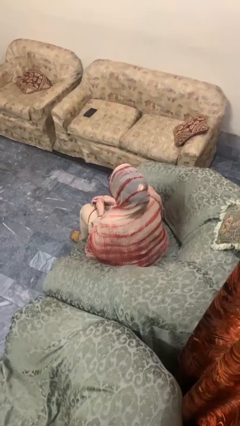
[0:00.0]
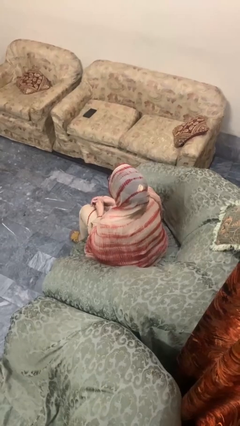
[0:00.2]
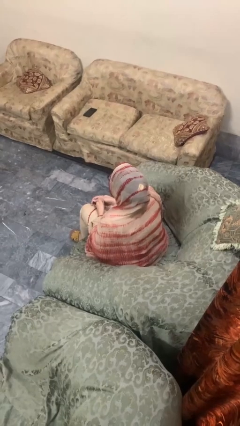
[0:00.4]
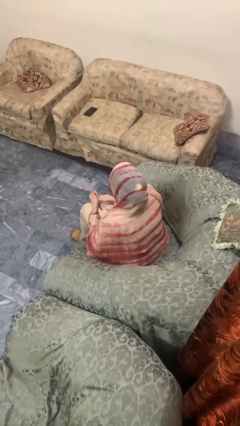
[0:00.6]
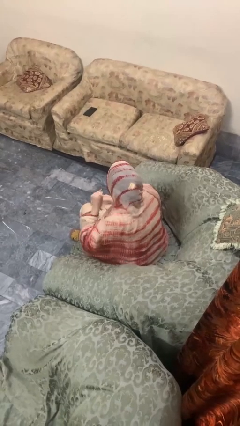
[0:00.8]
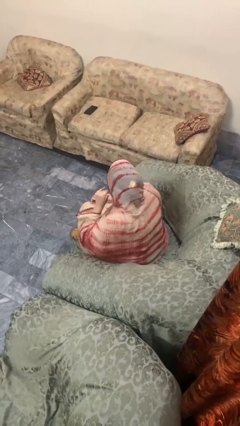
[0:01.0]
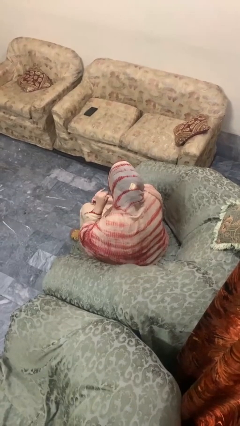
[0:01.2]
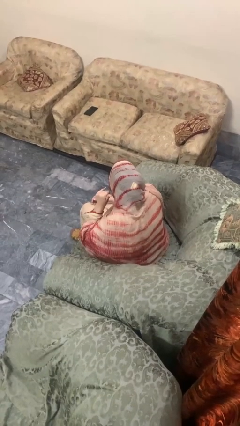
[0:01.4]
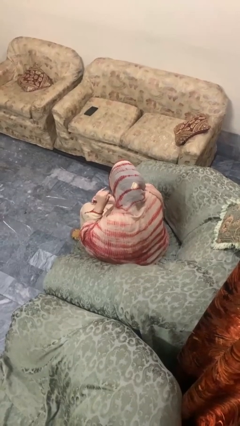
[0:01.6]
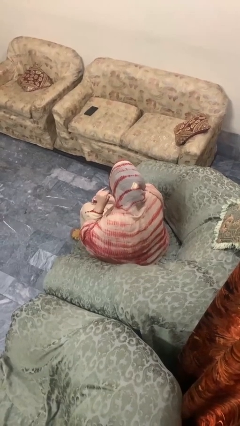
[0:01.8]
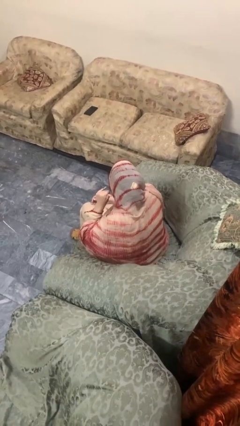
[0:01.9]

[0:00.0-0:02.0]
person gestures call me

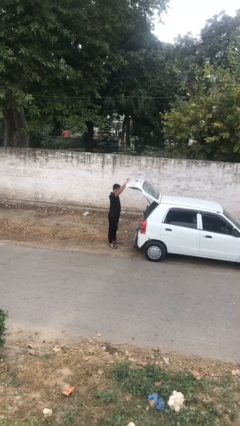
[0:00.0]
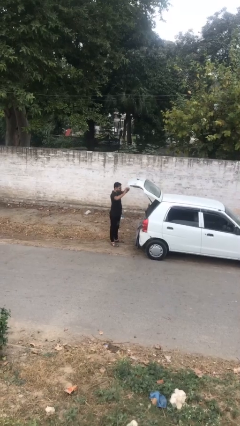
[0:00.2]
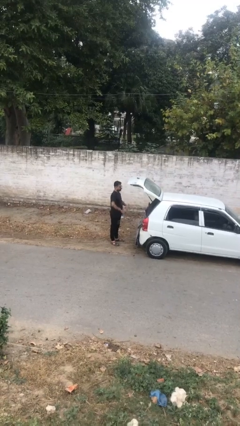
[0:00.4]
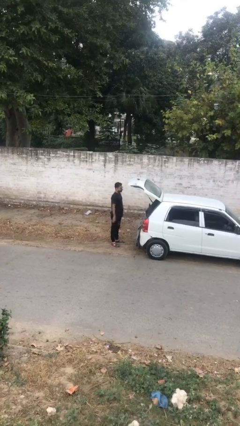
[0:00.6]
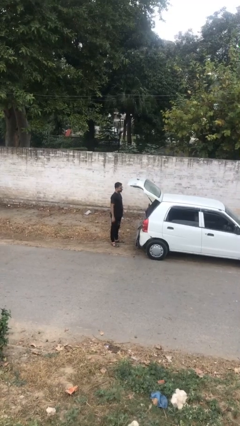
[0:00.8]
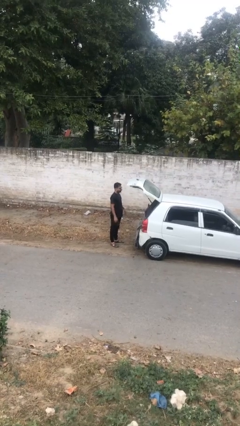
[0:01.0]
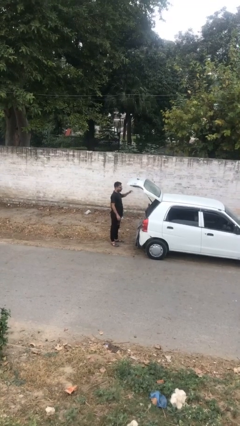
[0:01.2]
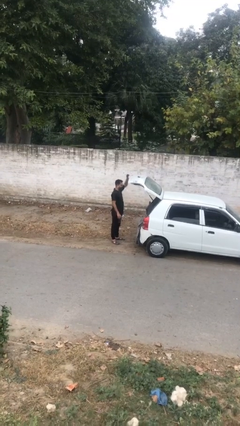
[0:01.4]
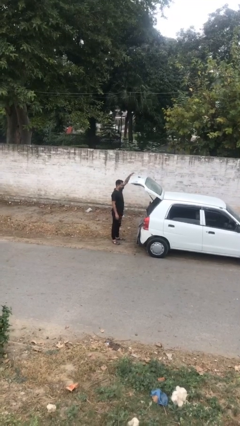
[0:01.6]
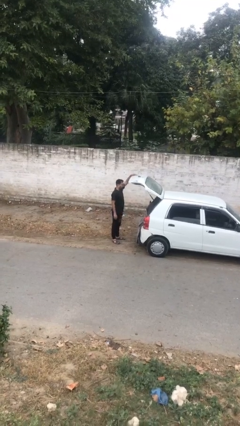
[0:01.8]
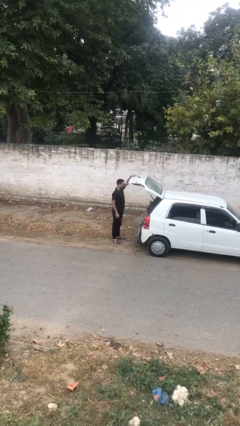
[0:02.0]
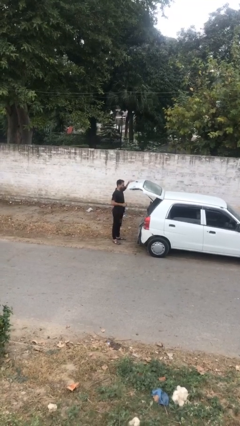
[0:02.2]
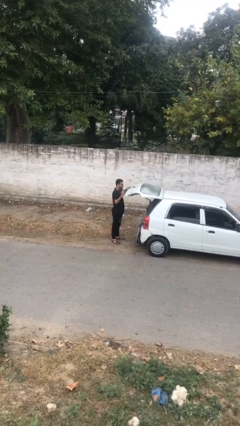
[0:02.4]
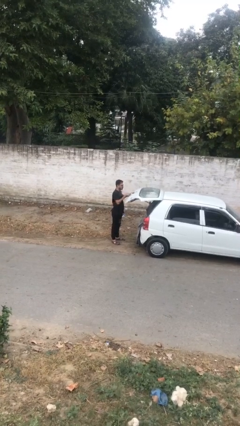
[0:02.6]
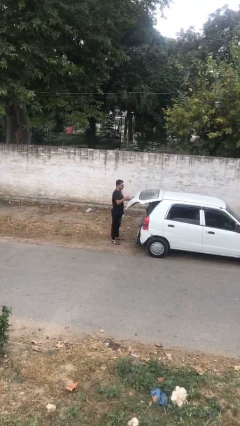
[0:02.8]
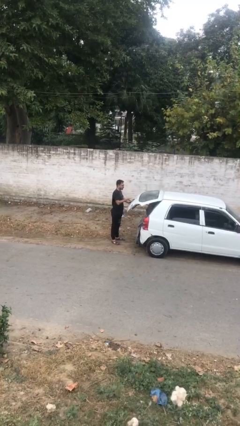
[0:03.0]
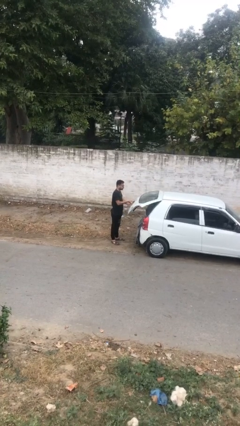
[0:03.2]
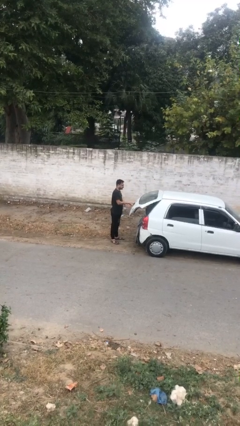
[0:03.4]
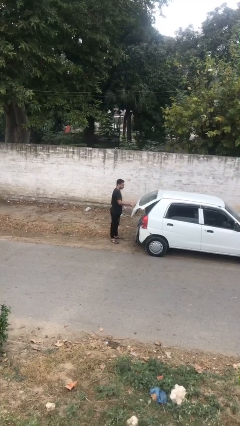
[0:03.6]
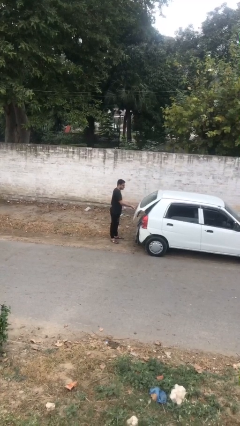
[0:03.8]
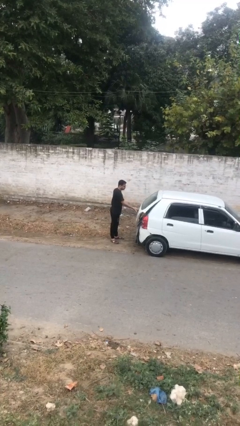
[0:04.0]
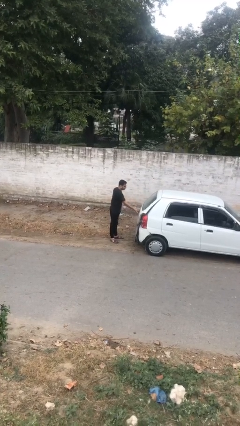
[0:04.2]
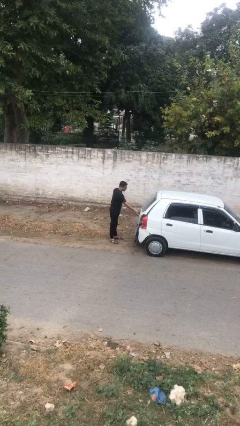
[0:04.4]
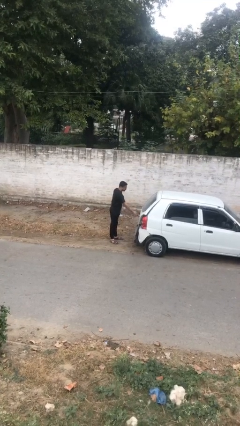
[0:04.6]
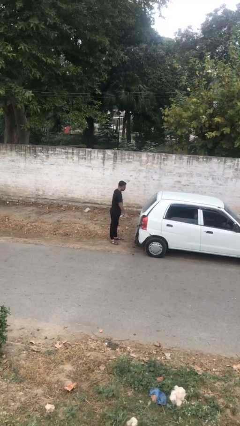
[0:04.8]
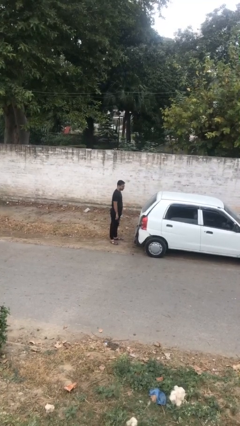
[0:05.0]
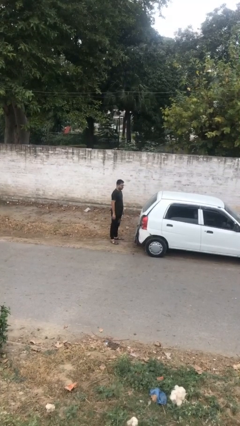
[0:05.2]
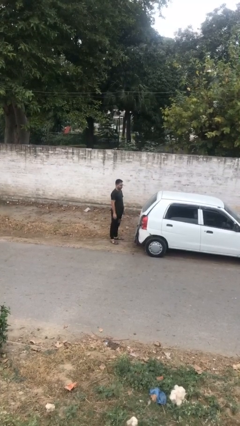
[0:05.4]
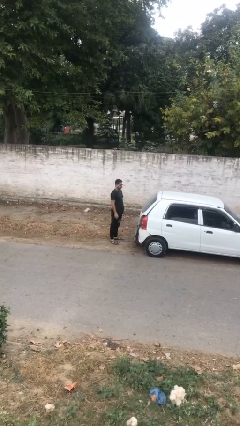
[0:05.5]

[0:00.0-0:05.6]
person closes car trunk

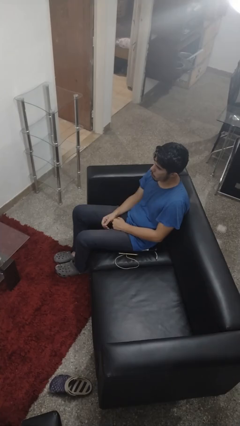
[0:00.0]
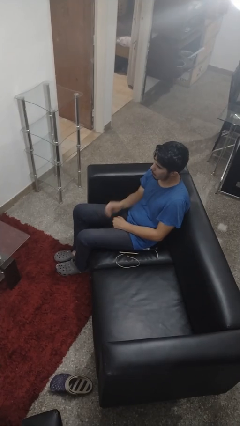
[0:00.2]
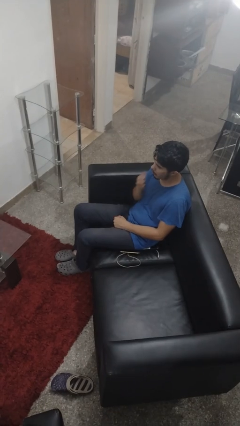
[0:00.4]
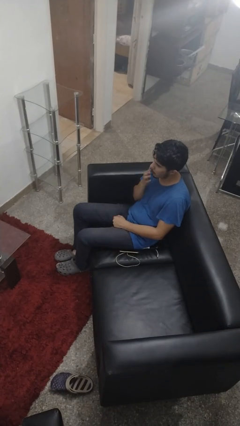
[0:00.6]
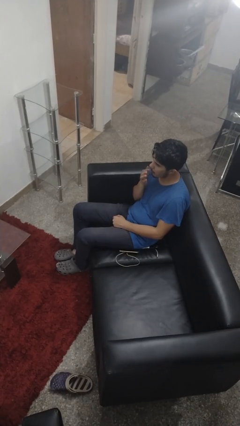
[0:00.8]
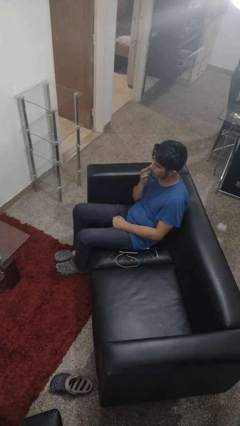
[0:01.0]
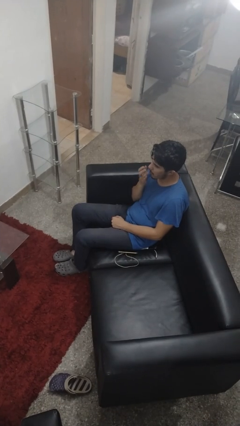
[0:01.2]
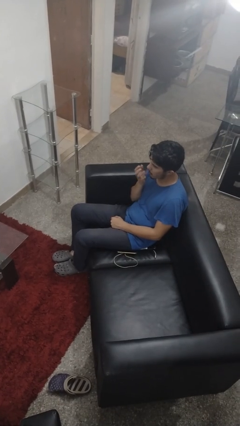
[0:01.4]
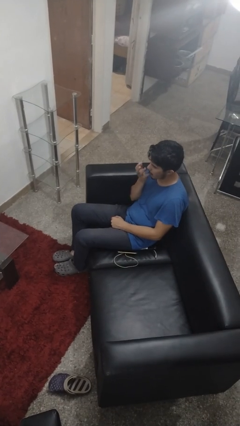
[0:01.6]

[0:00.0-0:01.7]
person licks fingers

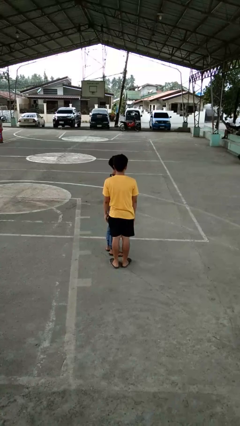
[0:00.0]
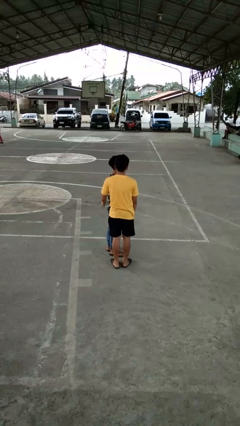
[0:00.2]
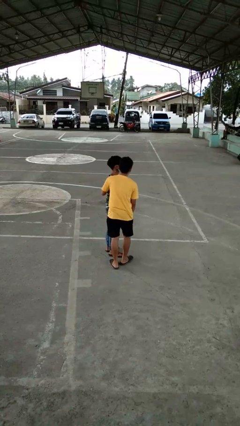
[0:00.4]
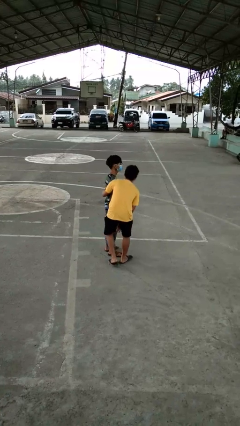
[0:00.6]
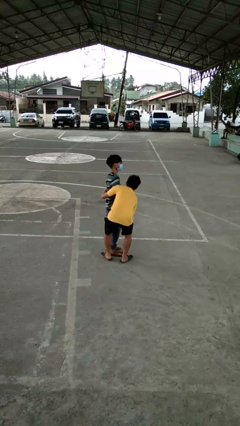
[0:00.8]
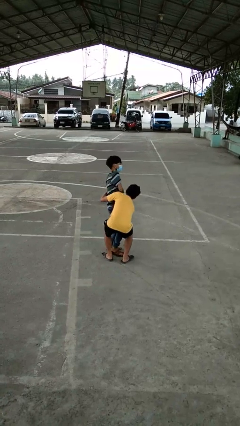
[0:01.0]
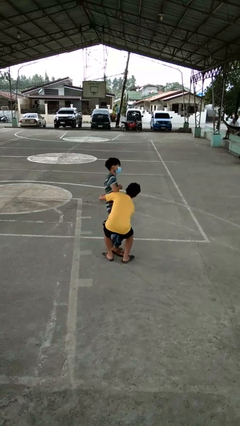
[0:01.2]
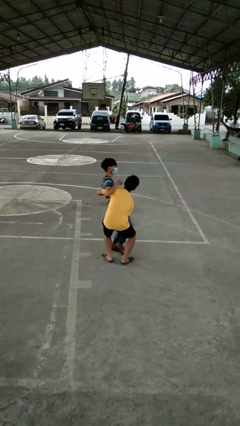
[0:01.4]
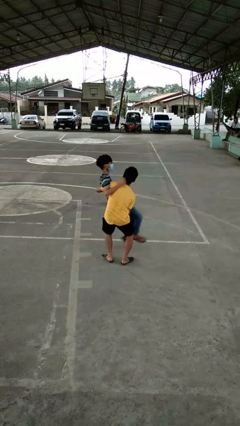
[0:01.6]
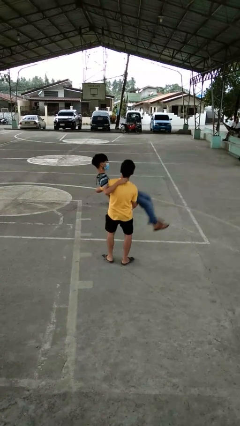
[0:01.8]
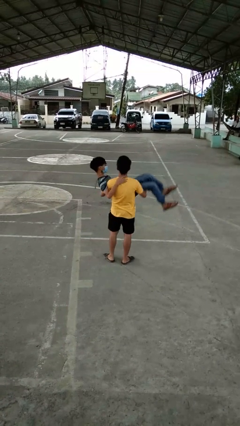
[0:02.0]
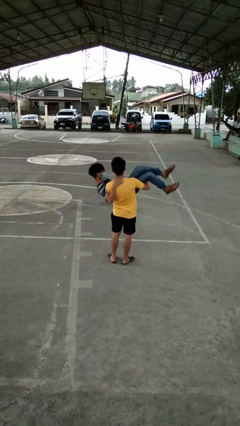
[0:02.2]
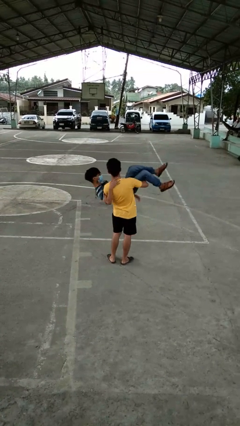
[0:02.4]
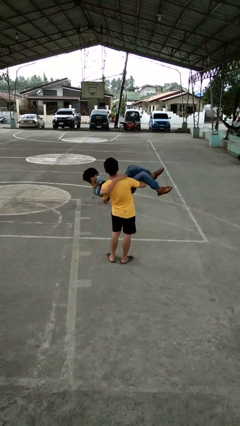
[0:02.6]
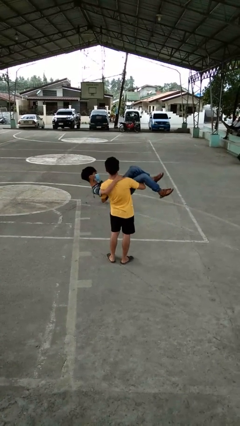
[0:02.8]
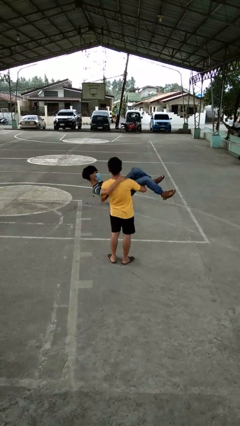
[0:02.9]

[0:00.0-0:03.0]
person picks up person

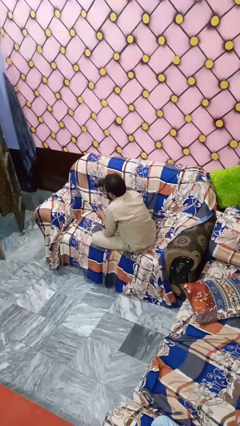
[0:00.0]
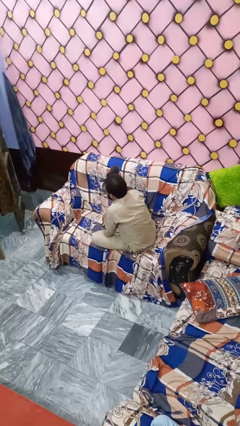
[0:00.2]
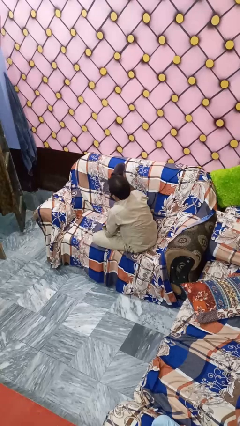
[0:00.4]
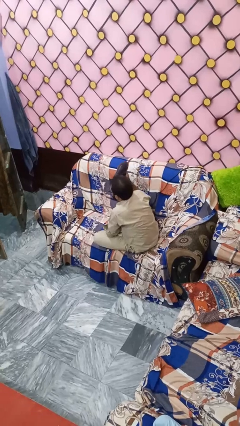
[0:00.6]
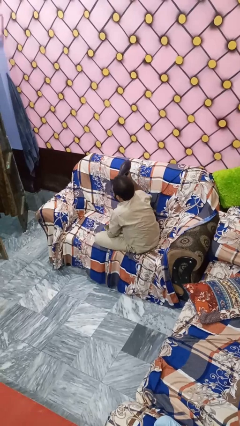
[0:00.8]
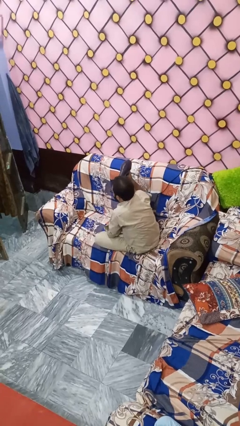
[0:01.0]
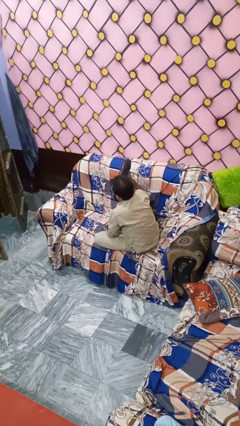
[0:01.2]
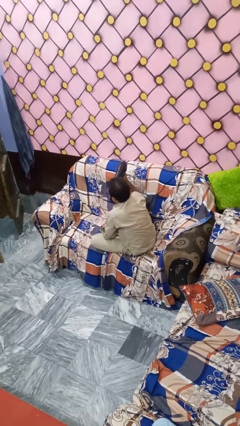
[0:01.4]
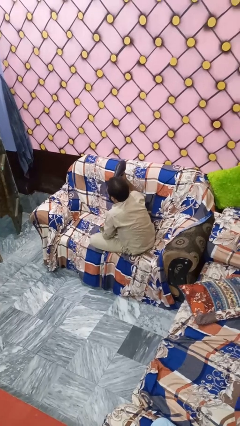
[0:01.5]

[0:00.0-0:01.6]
person dries hair with hairdryer

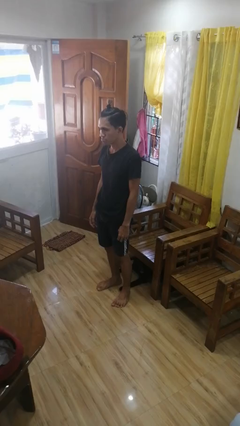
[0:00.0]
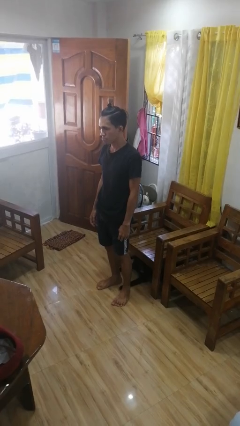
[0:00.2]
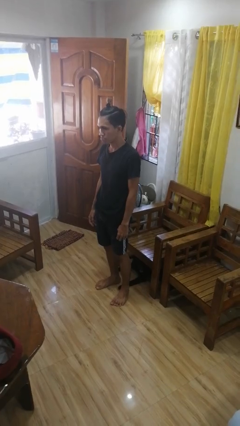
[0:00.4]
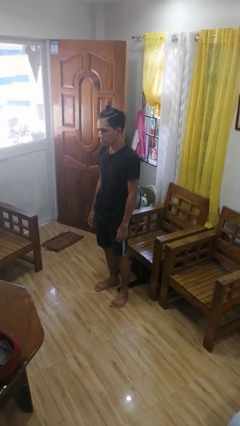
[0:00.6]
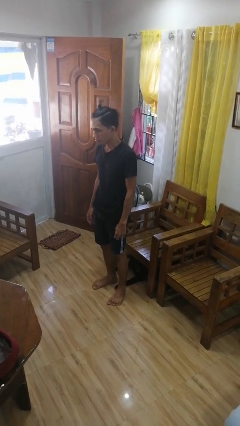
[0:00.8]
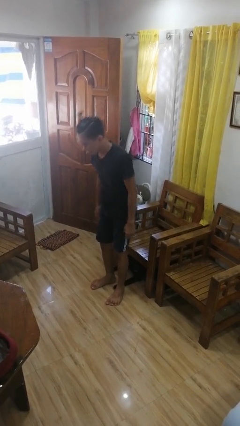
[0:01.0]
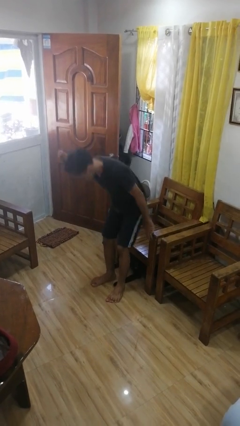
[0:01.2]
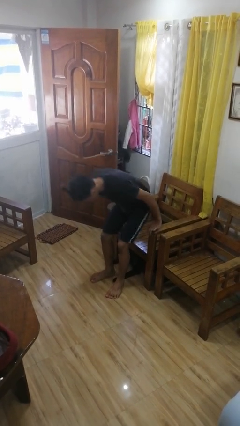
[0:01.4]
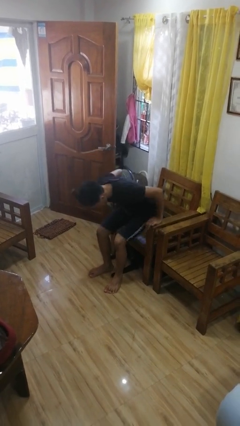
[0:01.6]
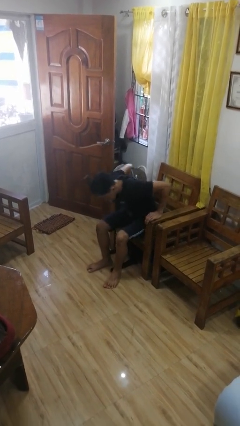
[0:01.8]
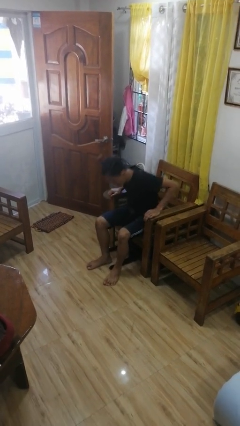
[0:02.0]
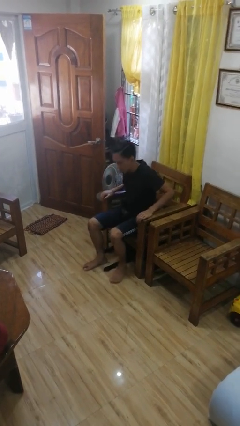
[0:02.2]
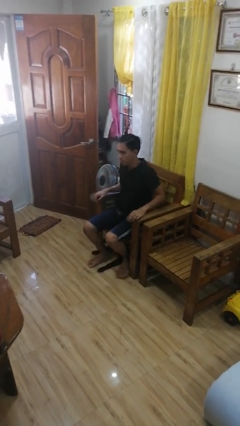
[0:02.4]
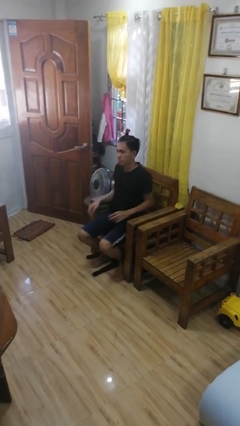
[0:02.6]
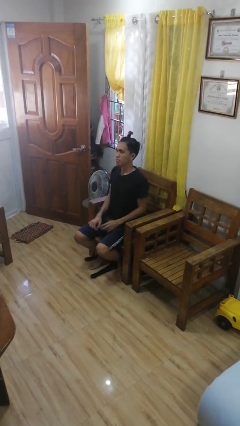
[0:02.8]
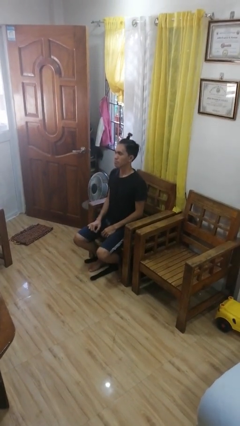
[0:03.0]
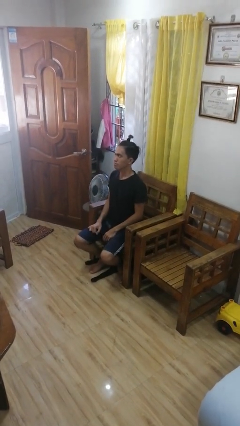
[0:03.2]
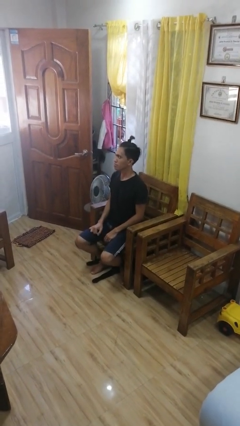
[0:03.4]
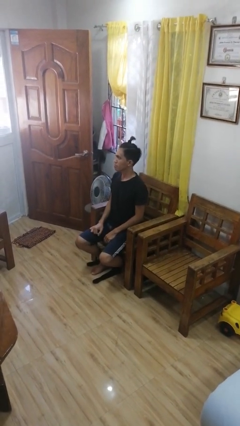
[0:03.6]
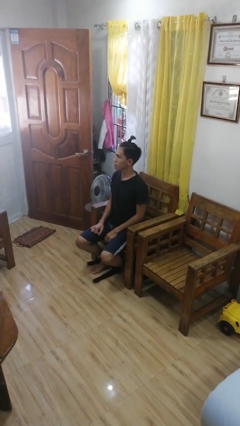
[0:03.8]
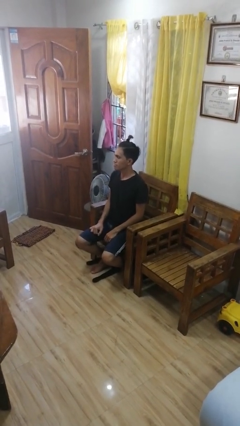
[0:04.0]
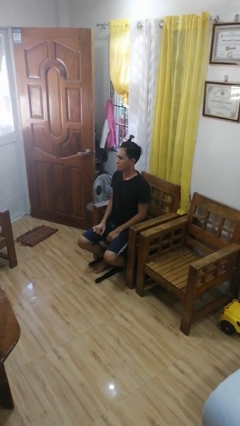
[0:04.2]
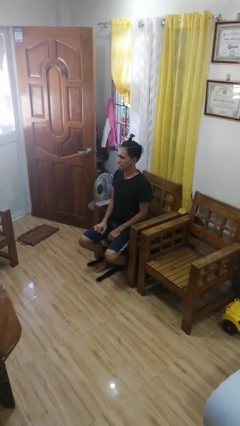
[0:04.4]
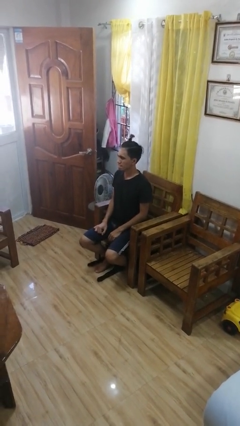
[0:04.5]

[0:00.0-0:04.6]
person sits down
